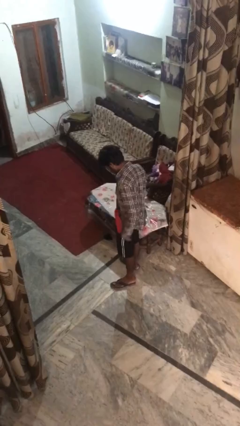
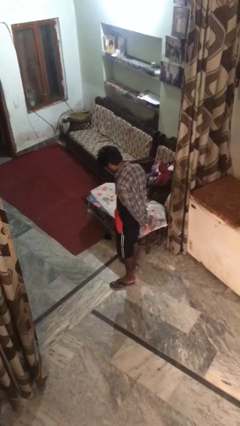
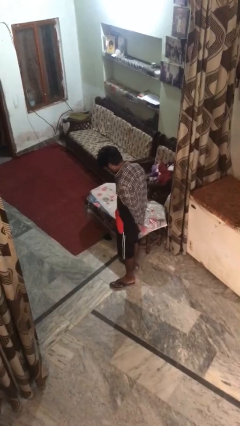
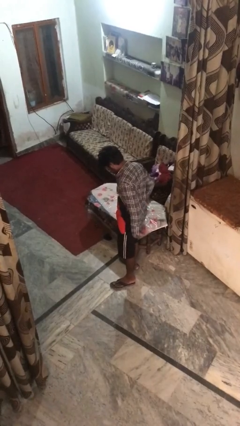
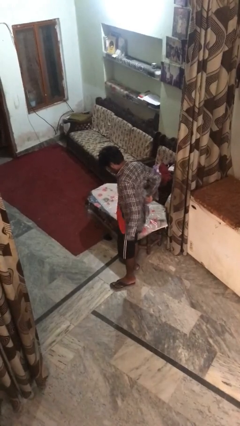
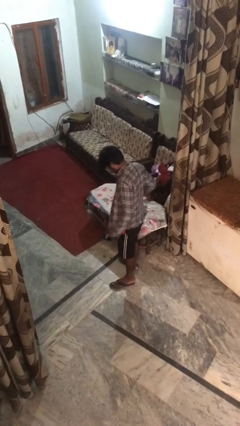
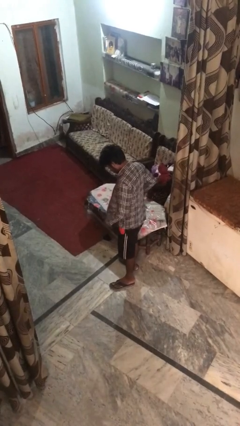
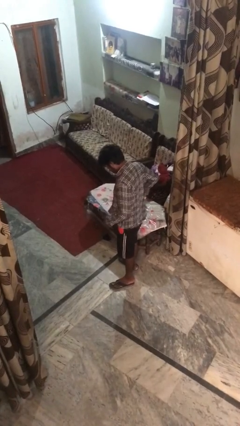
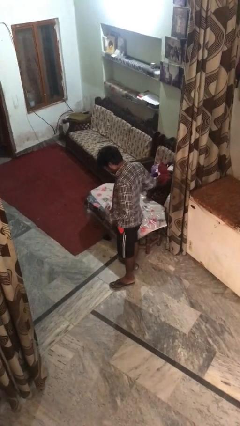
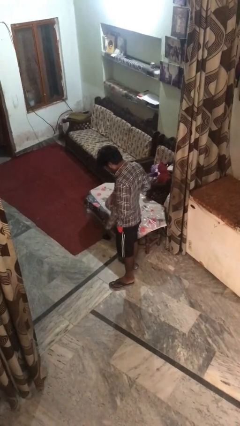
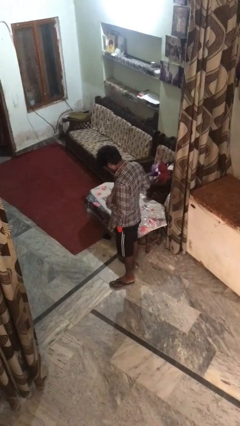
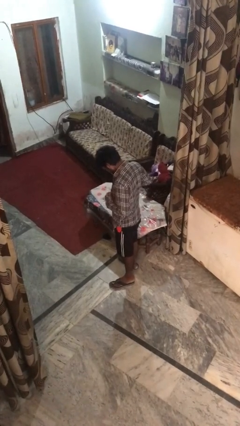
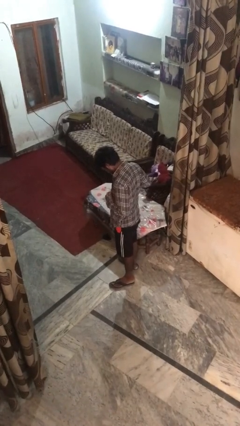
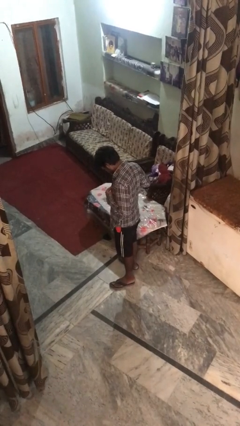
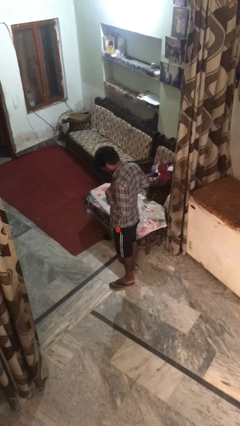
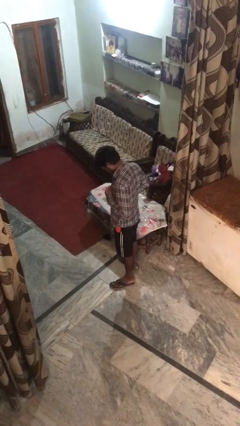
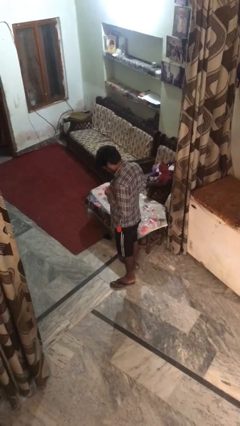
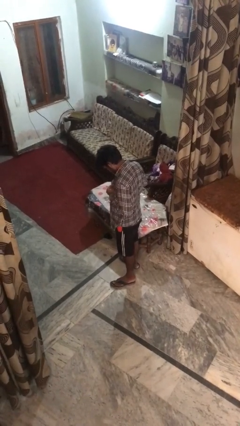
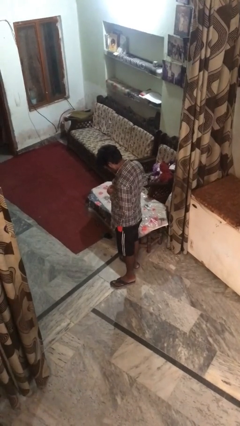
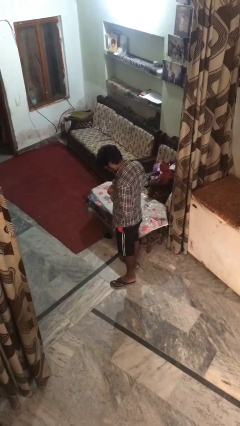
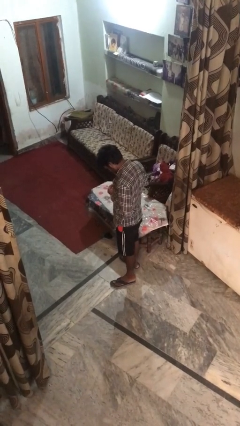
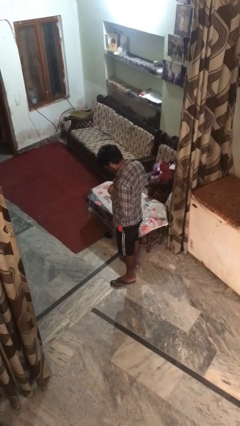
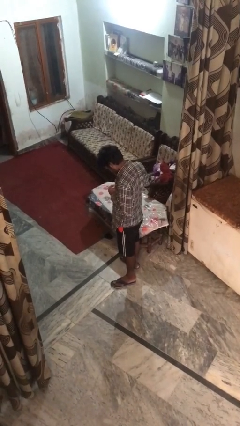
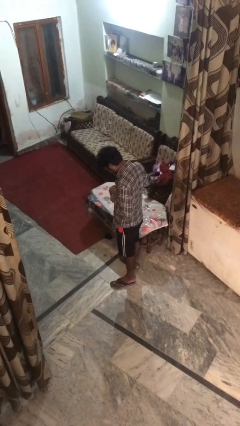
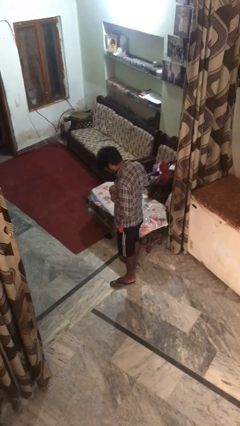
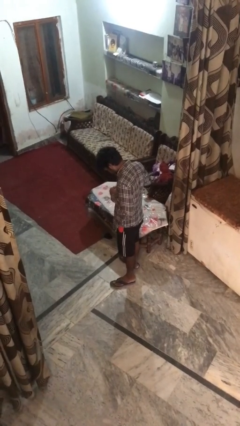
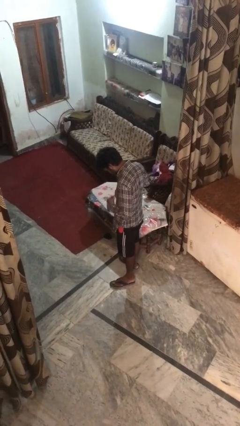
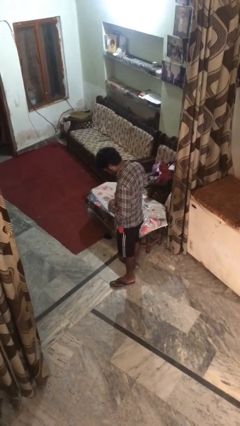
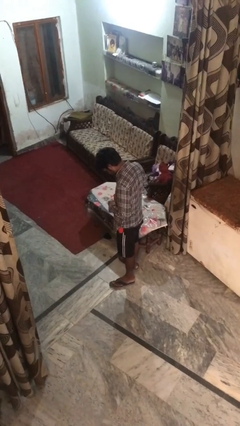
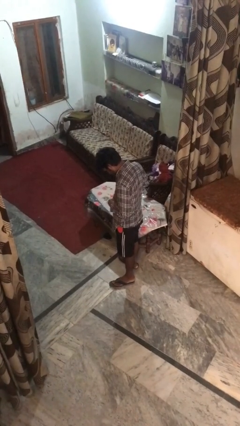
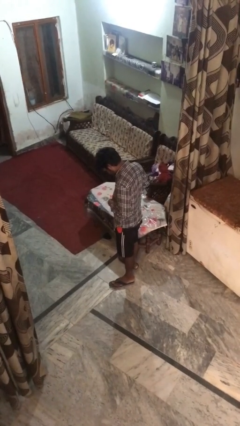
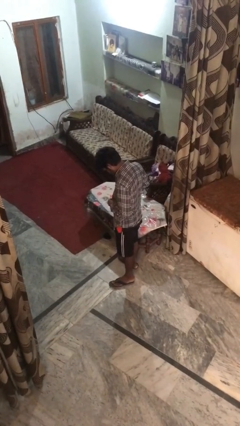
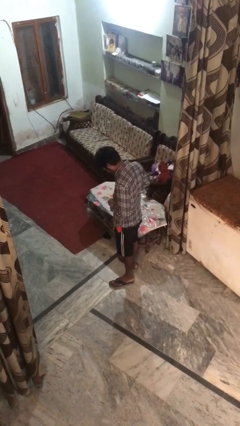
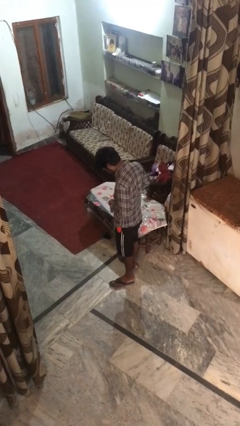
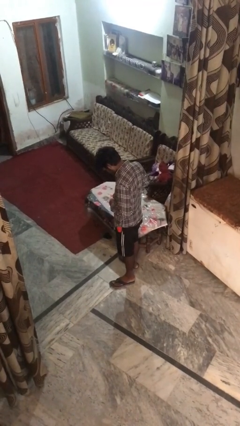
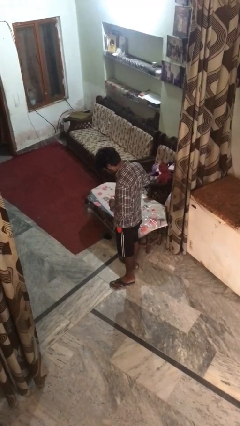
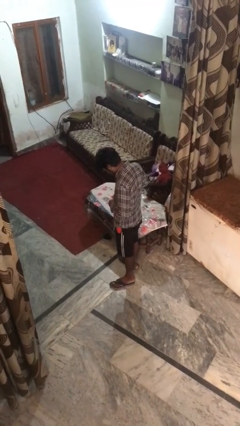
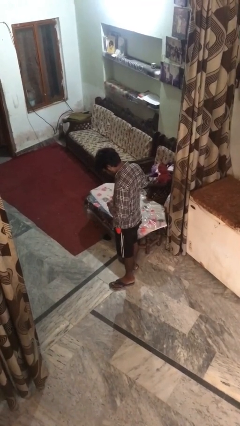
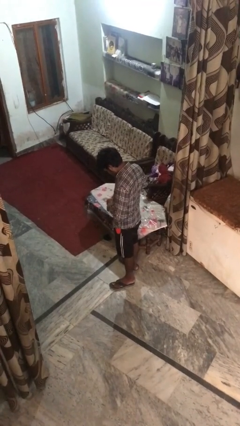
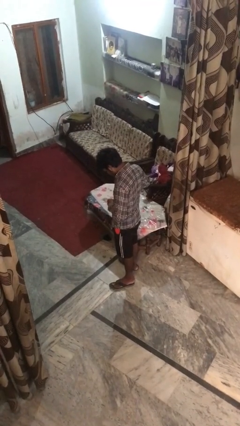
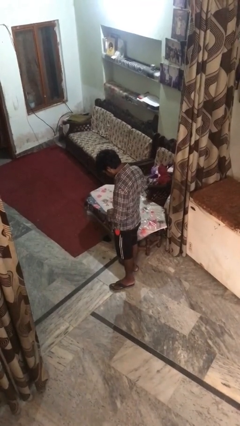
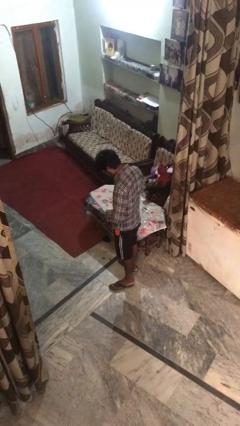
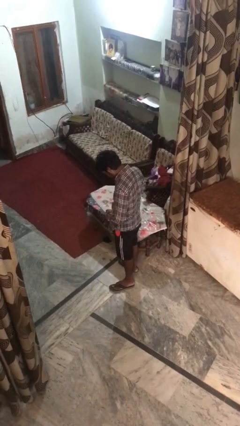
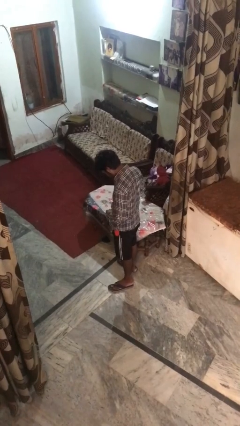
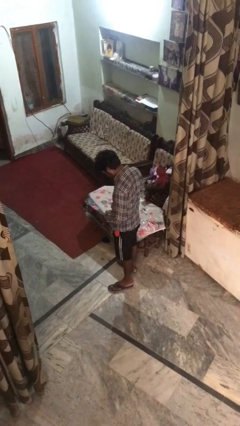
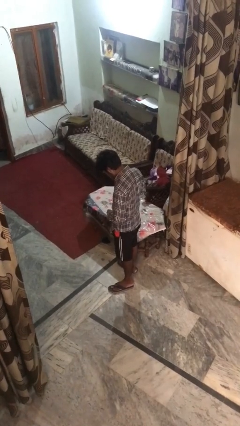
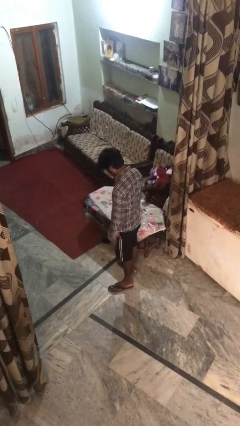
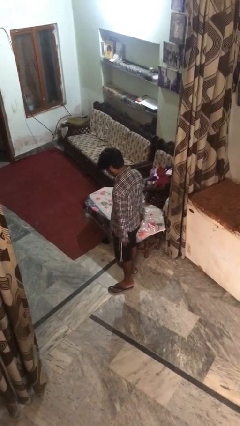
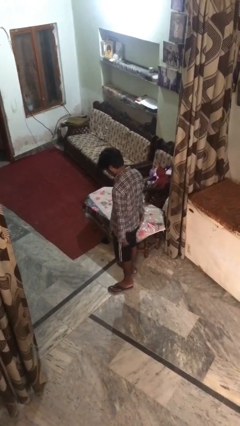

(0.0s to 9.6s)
person buttons shirt

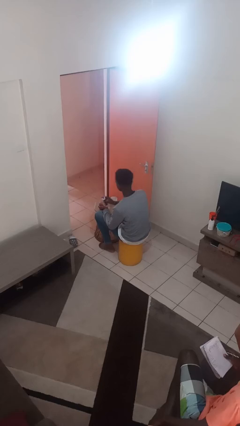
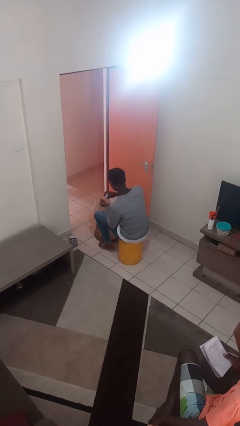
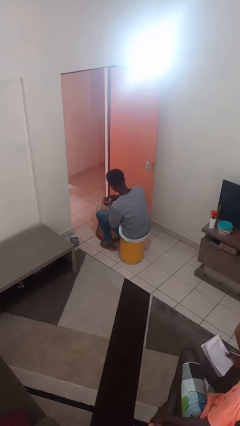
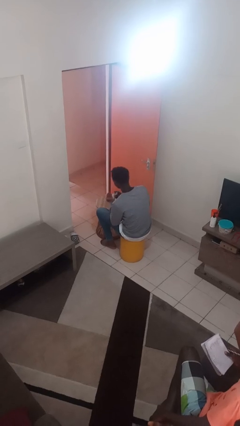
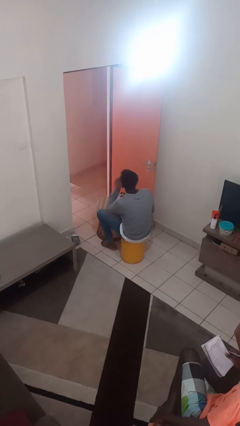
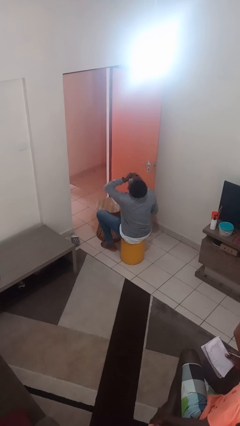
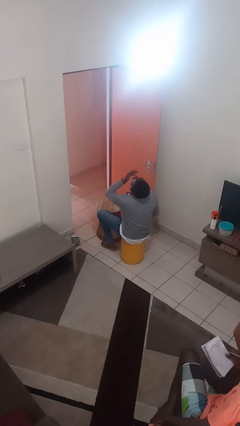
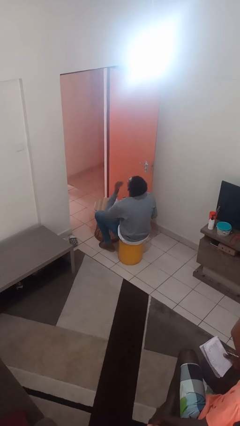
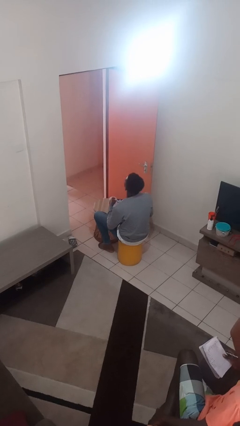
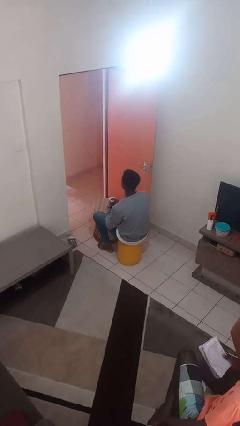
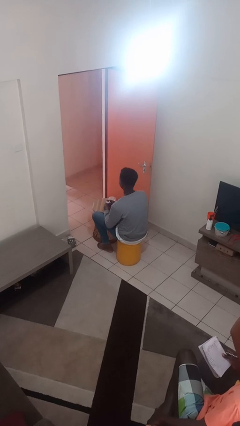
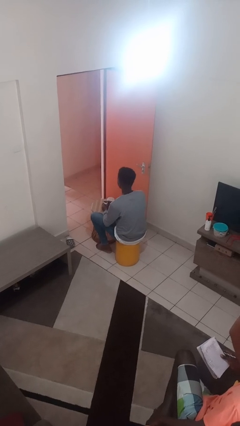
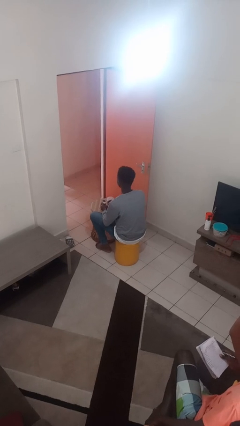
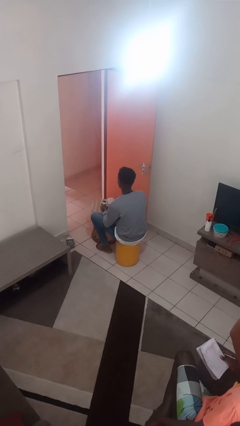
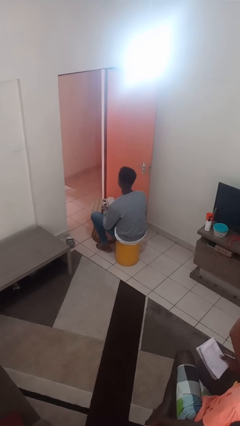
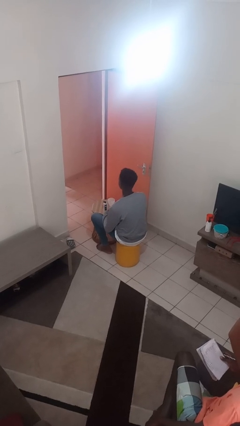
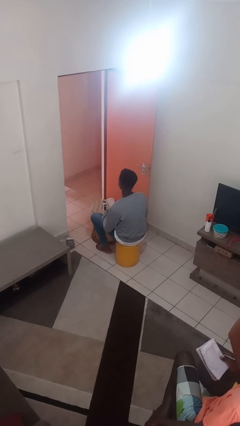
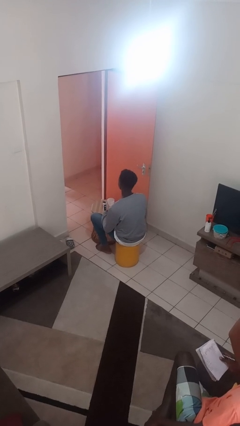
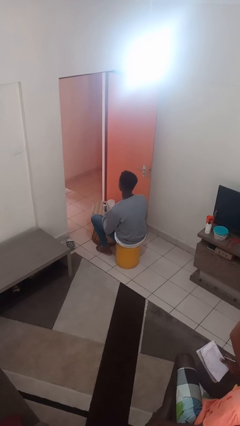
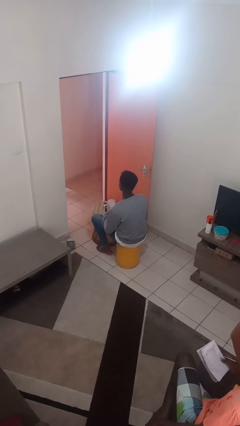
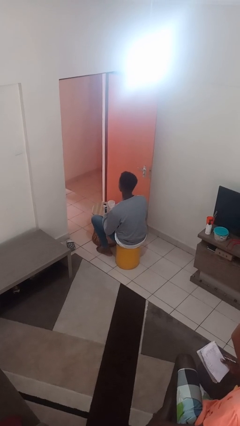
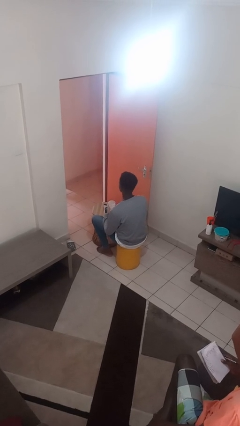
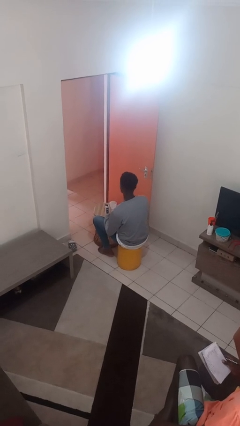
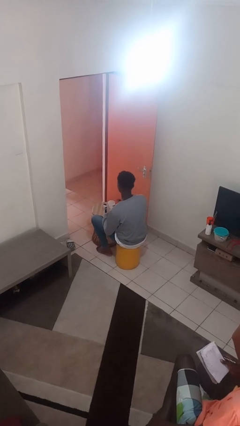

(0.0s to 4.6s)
person takes medicine pills

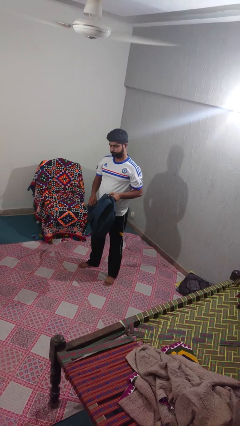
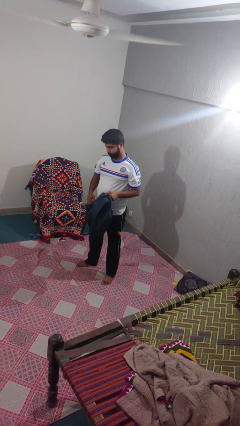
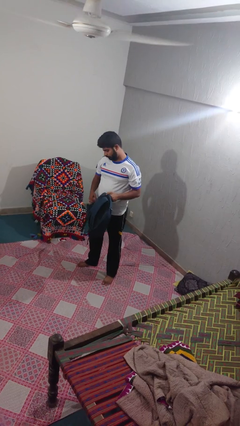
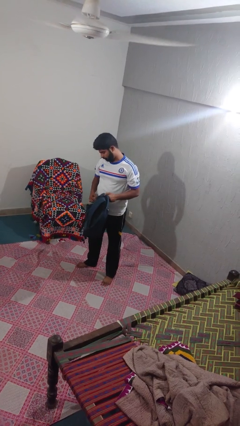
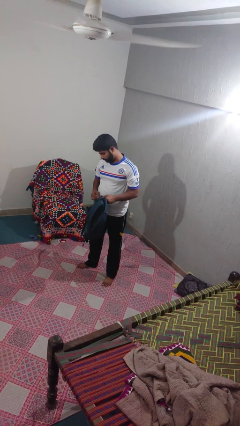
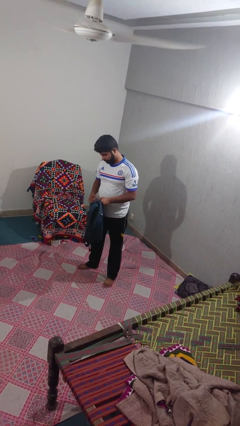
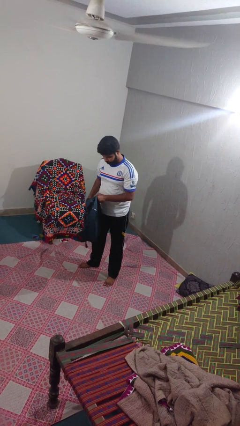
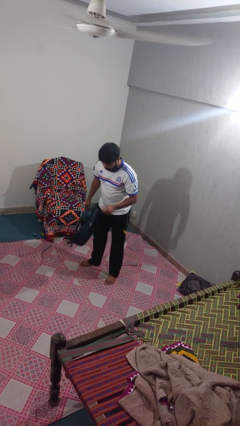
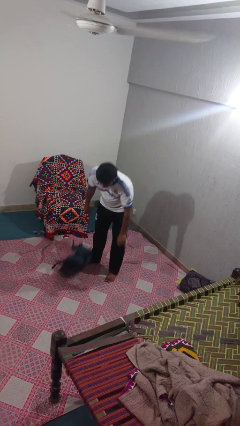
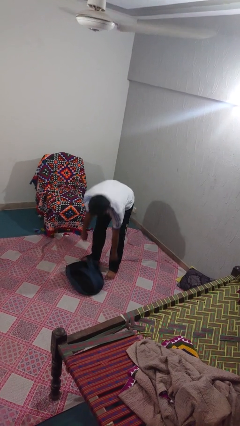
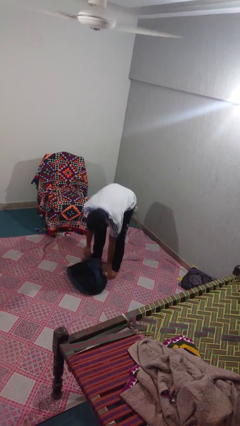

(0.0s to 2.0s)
person drops object

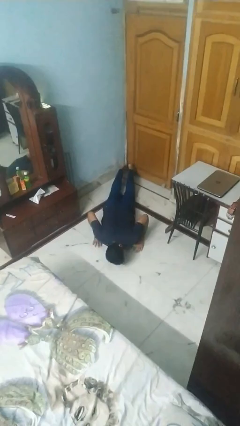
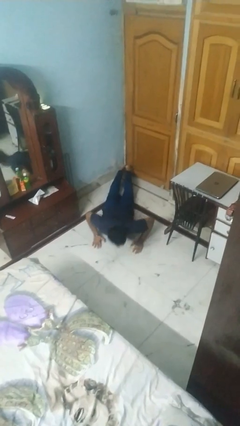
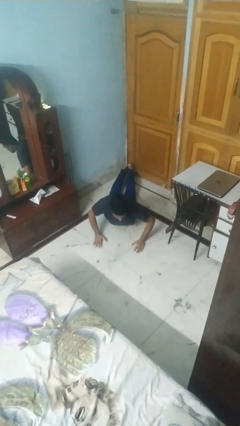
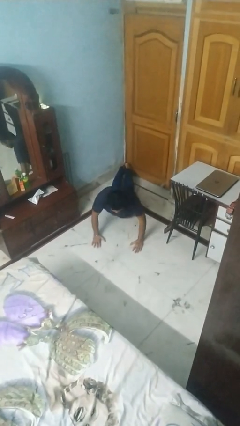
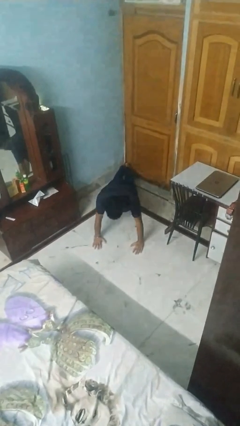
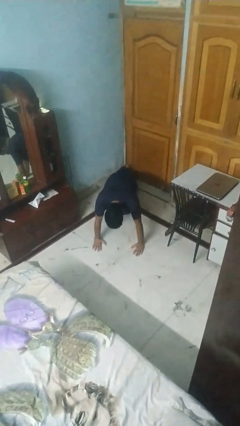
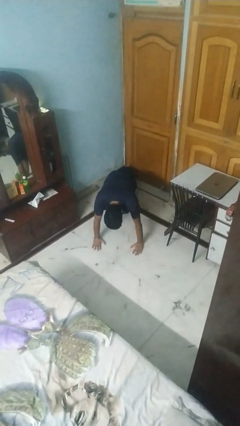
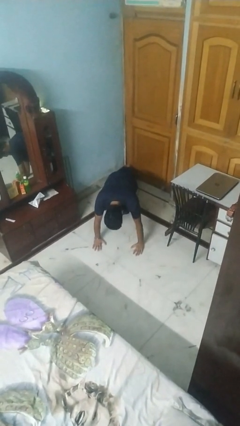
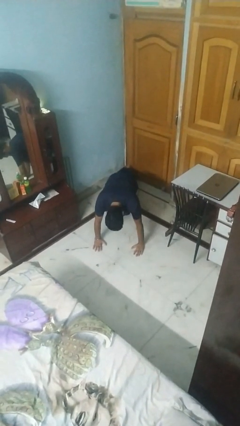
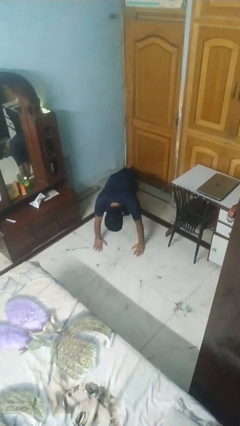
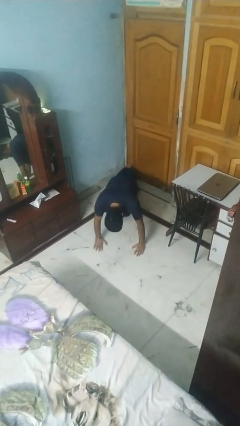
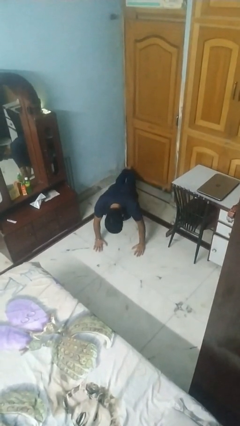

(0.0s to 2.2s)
person exercises with pushup
